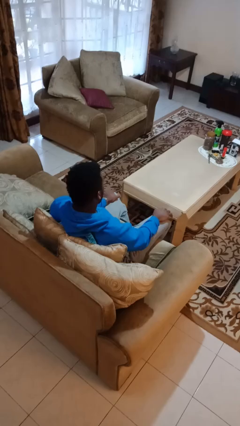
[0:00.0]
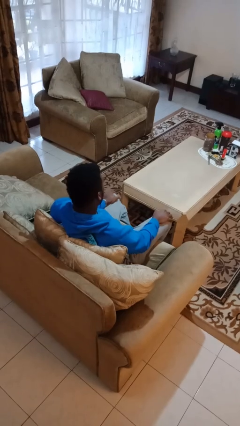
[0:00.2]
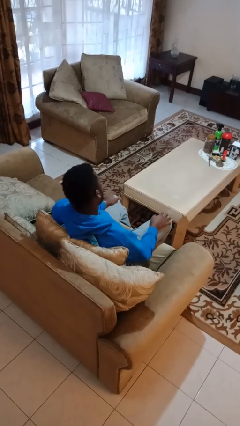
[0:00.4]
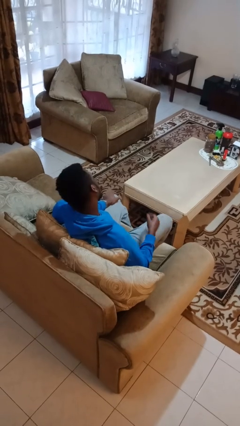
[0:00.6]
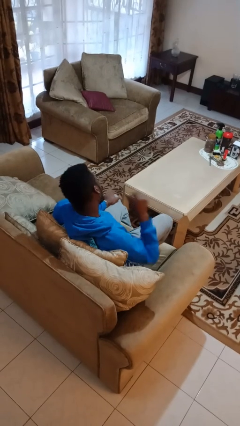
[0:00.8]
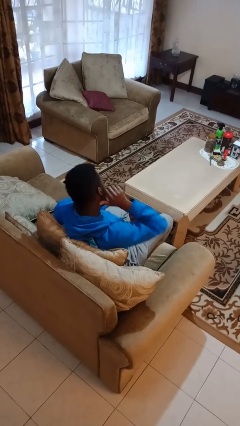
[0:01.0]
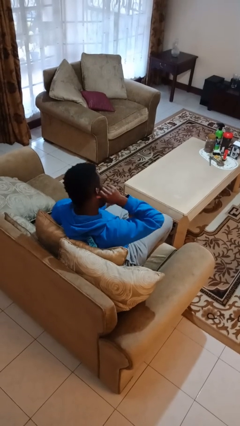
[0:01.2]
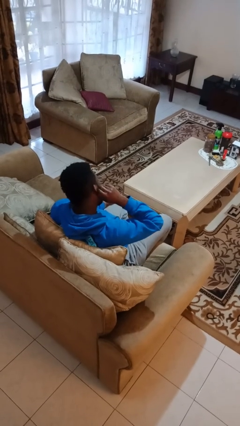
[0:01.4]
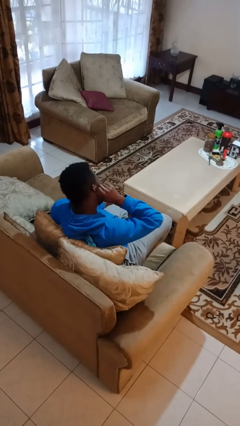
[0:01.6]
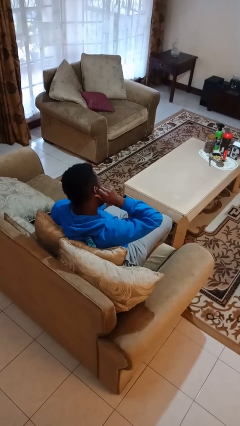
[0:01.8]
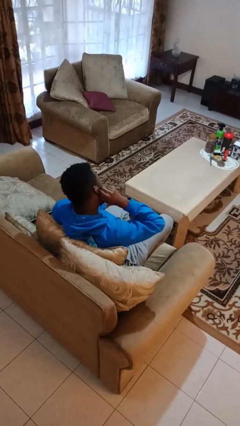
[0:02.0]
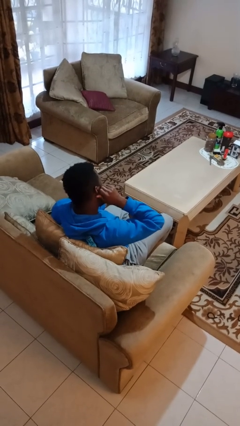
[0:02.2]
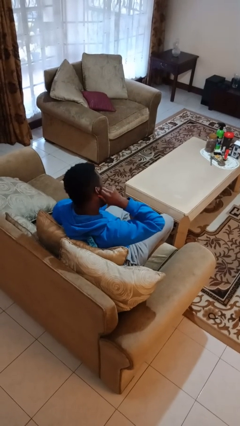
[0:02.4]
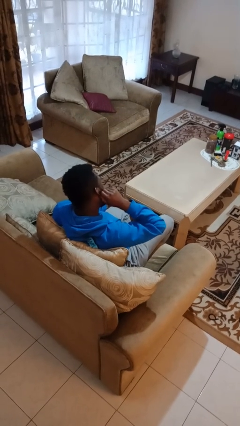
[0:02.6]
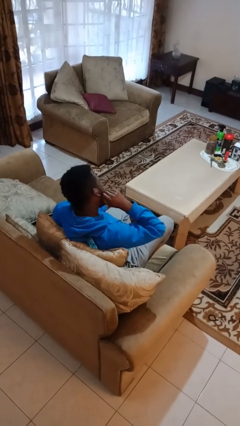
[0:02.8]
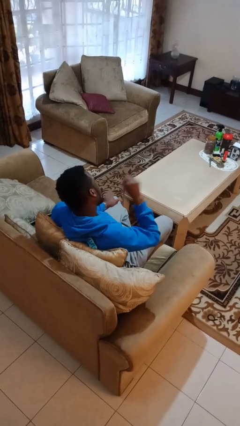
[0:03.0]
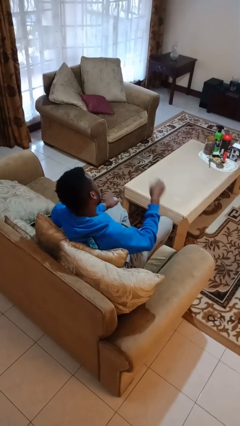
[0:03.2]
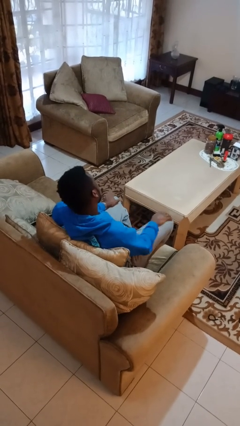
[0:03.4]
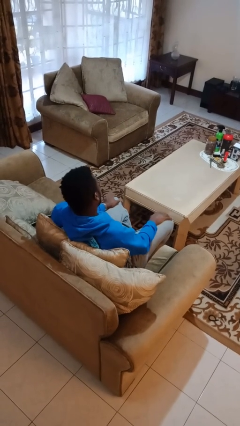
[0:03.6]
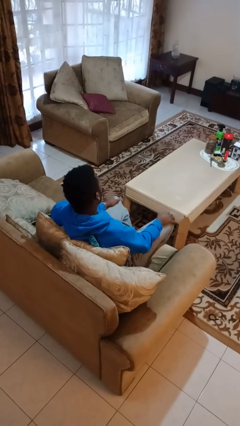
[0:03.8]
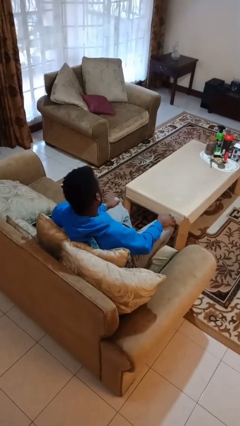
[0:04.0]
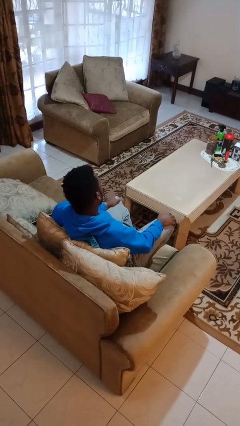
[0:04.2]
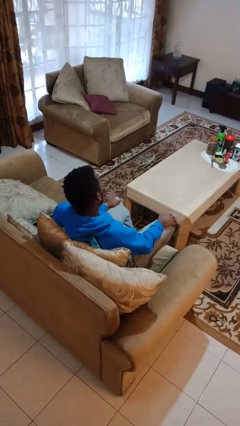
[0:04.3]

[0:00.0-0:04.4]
person touches earlobe

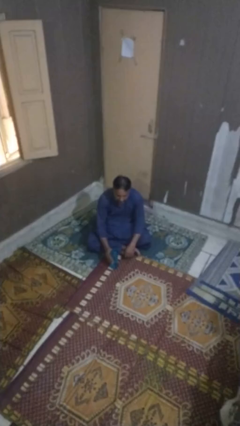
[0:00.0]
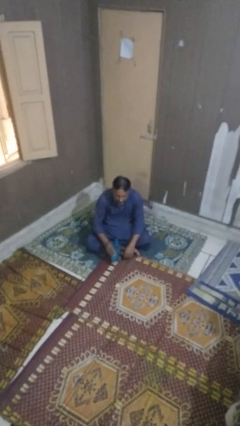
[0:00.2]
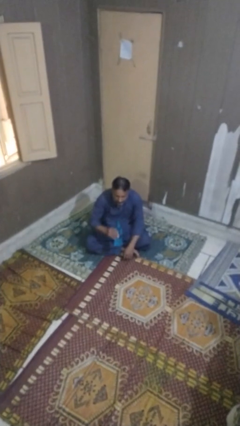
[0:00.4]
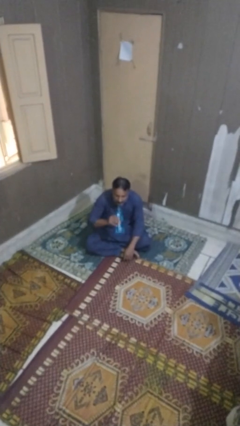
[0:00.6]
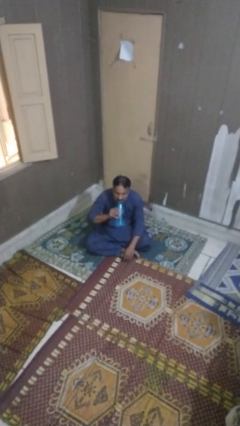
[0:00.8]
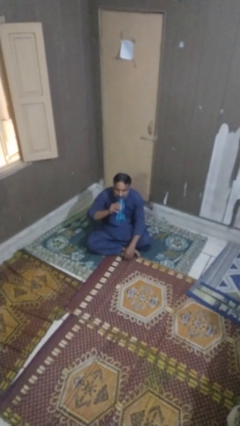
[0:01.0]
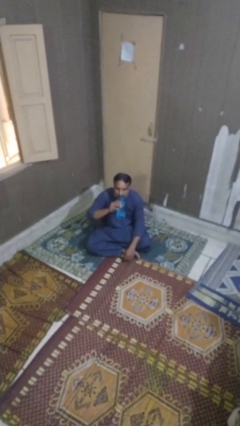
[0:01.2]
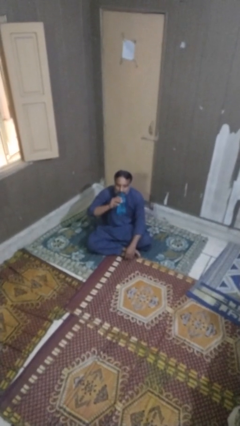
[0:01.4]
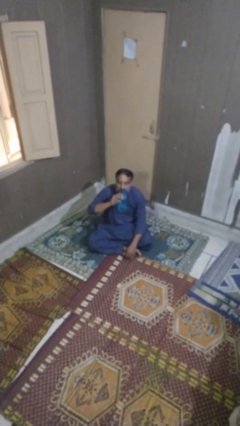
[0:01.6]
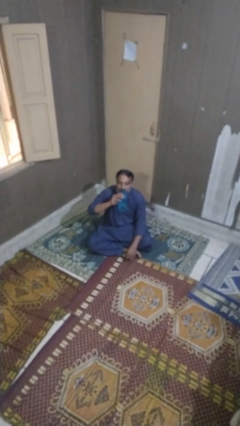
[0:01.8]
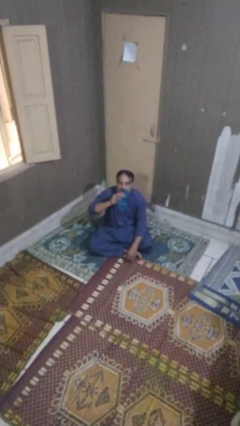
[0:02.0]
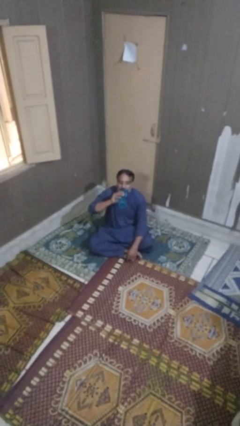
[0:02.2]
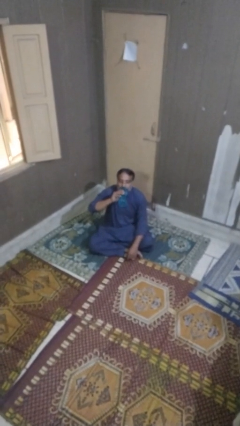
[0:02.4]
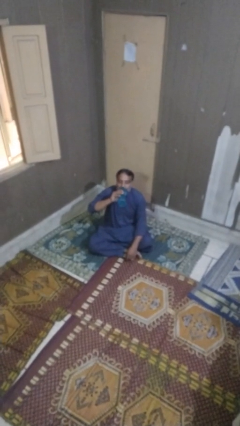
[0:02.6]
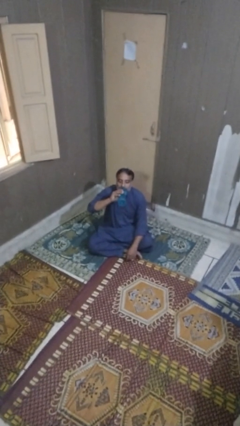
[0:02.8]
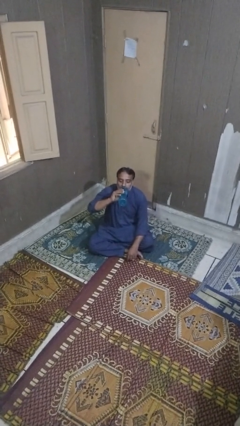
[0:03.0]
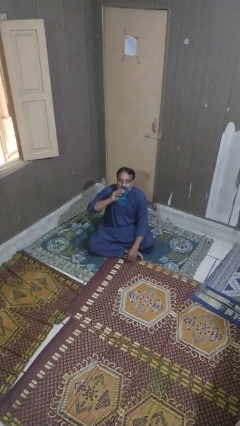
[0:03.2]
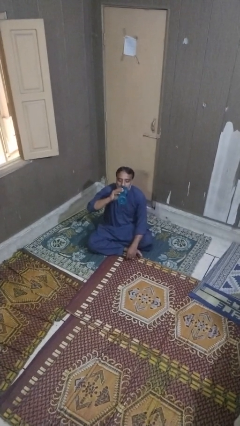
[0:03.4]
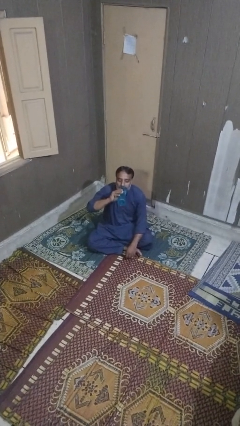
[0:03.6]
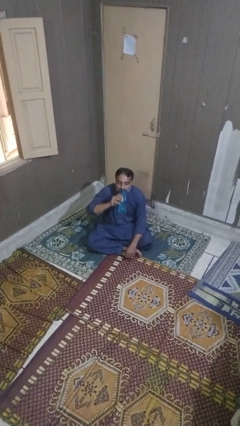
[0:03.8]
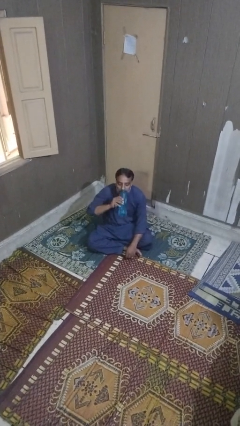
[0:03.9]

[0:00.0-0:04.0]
person drinks from bottle

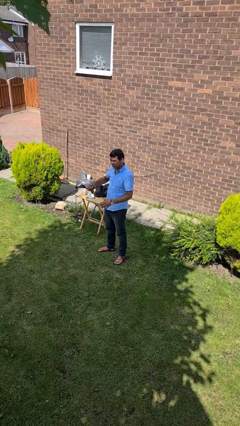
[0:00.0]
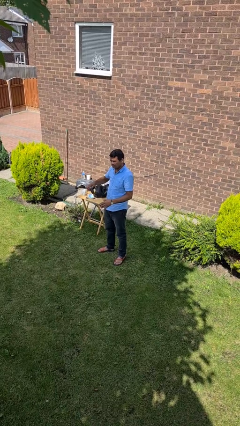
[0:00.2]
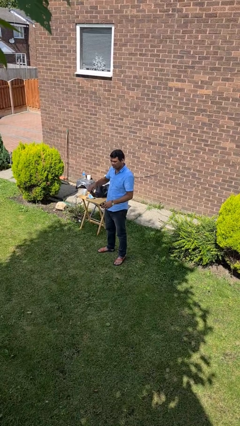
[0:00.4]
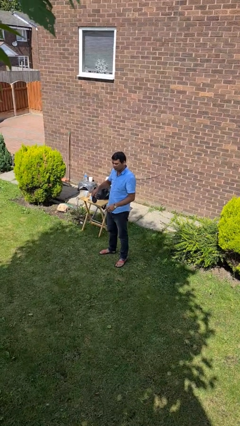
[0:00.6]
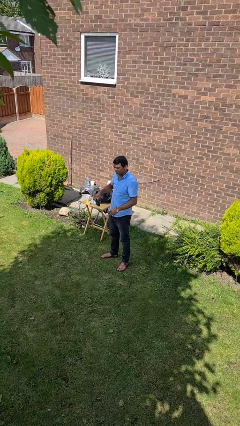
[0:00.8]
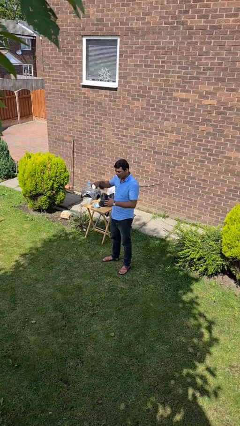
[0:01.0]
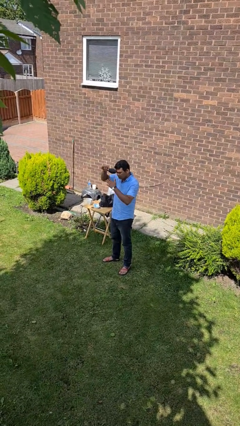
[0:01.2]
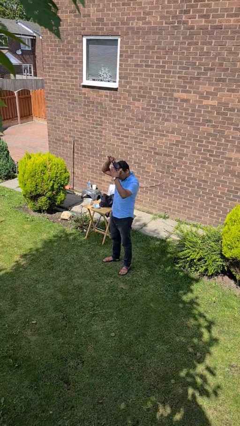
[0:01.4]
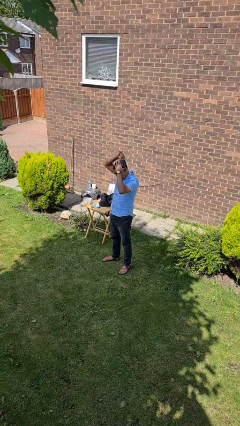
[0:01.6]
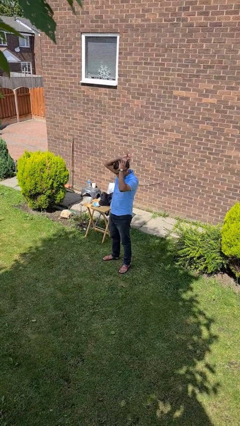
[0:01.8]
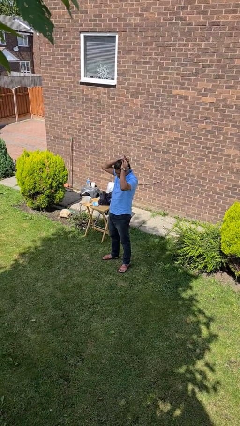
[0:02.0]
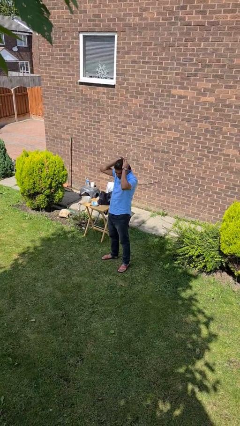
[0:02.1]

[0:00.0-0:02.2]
person brushes hair

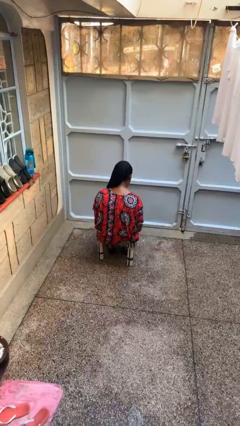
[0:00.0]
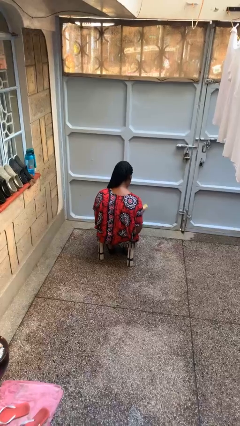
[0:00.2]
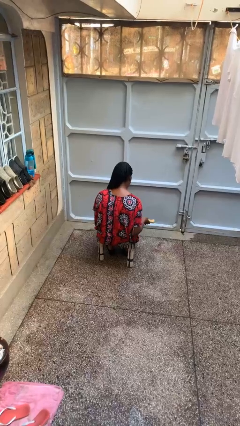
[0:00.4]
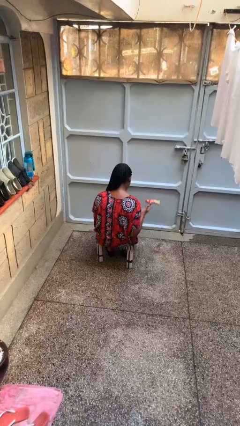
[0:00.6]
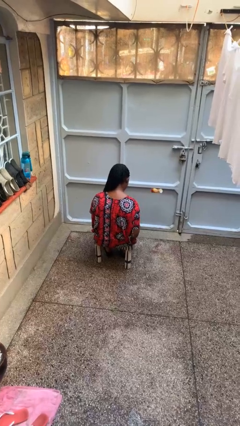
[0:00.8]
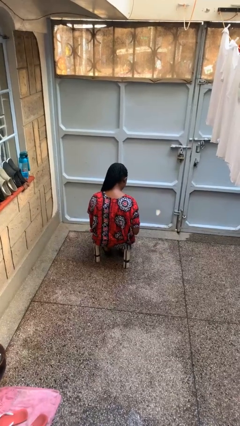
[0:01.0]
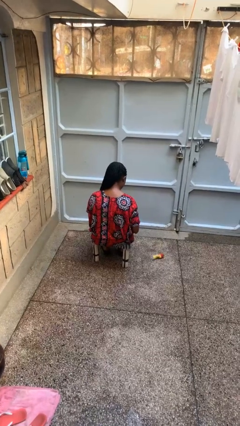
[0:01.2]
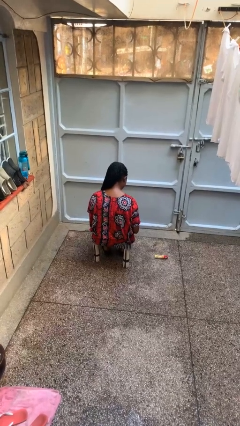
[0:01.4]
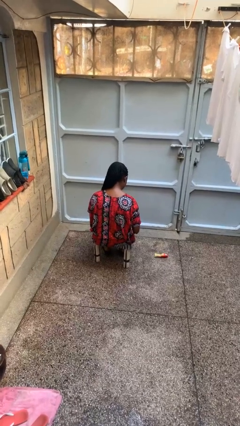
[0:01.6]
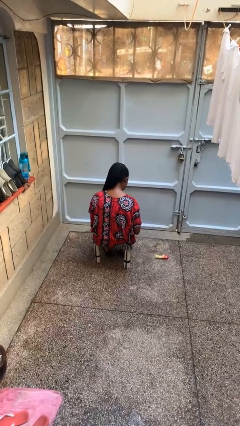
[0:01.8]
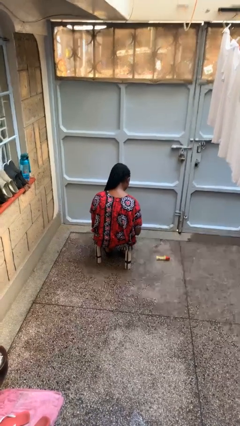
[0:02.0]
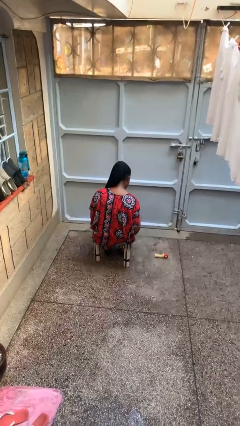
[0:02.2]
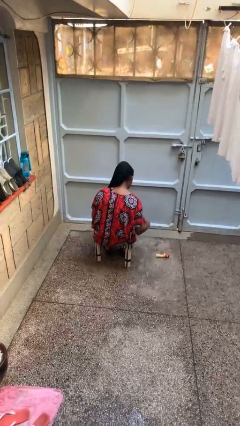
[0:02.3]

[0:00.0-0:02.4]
person throws object into air

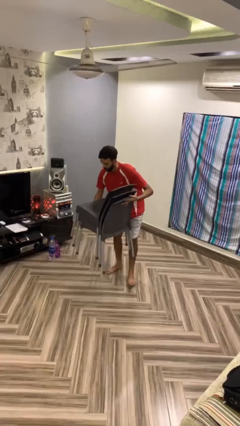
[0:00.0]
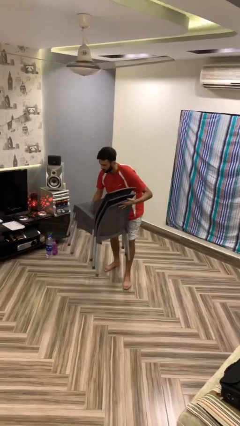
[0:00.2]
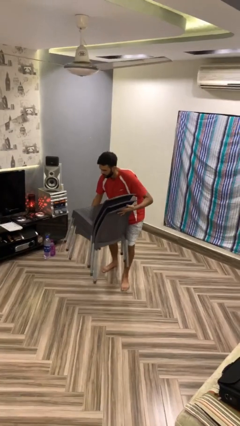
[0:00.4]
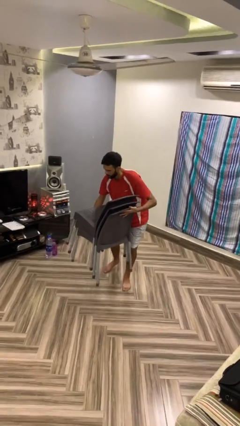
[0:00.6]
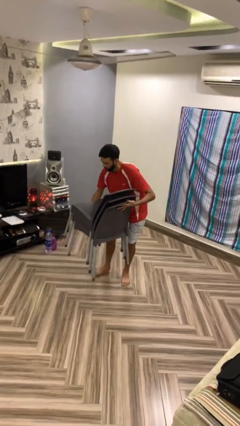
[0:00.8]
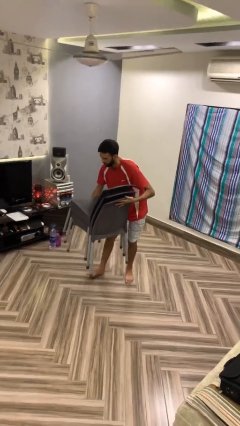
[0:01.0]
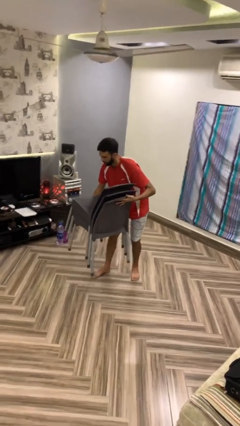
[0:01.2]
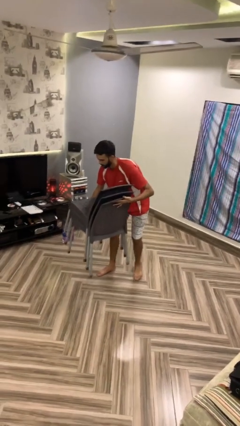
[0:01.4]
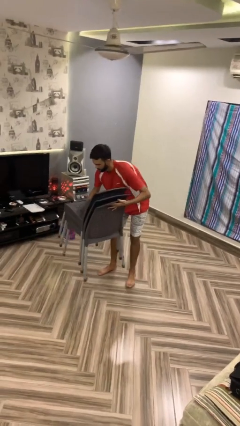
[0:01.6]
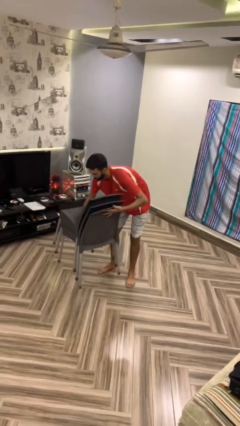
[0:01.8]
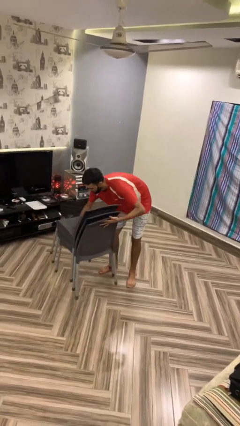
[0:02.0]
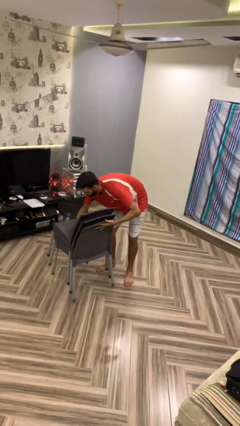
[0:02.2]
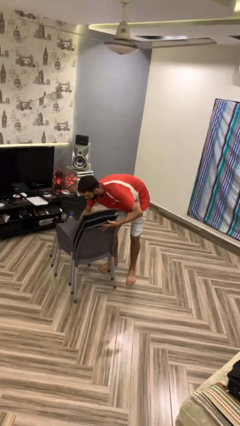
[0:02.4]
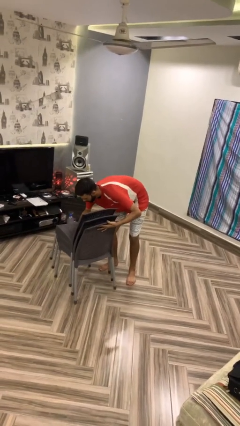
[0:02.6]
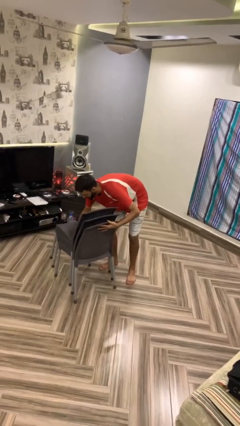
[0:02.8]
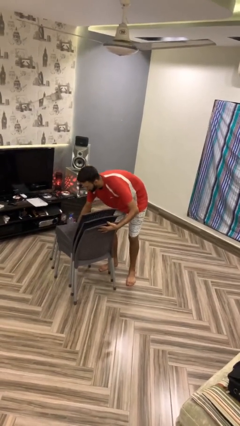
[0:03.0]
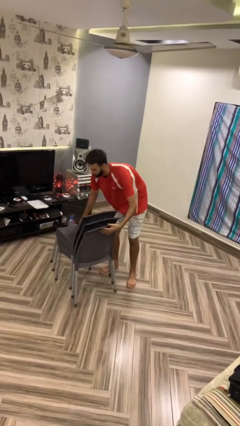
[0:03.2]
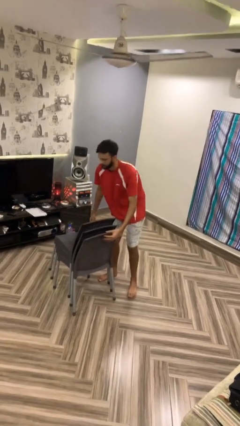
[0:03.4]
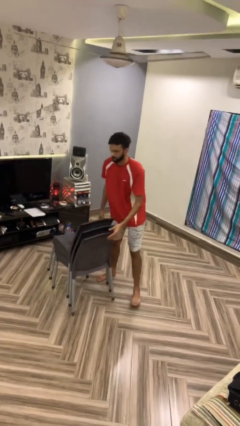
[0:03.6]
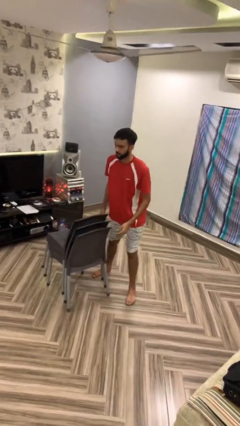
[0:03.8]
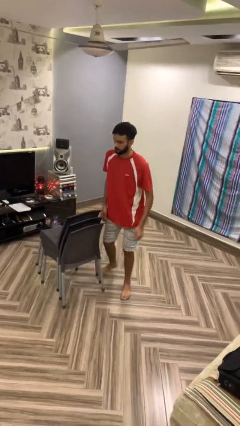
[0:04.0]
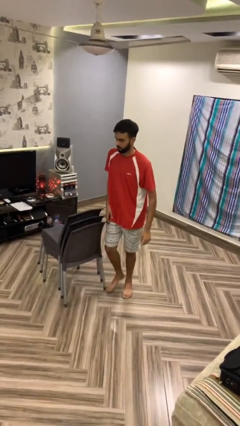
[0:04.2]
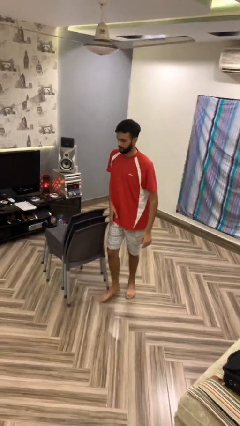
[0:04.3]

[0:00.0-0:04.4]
person puts down object on floor

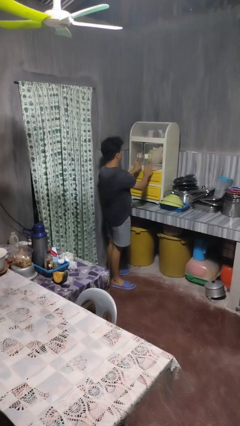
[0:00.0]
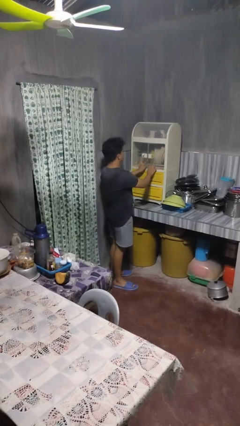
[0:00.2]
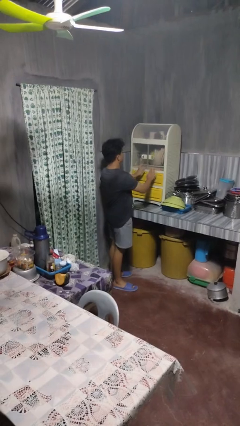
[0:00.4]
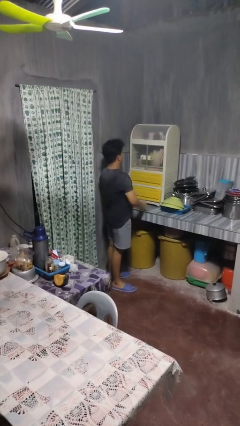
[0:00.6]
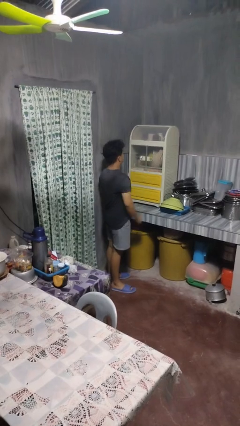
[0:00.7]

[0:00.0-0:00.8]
person closes cabinet
